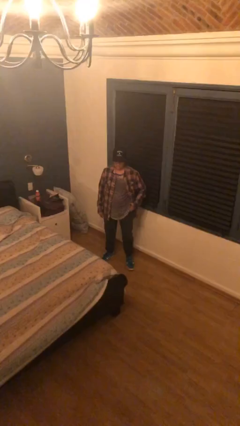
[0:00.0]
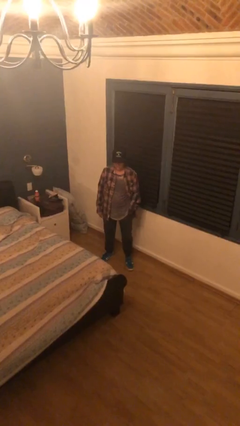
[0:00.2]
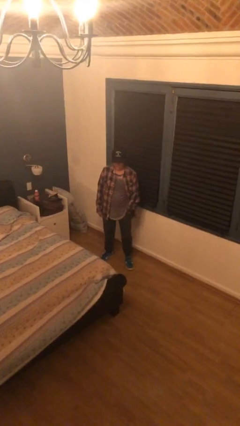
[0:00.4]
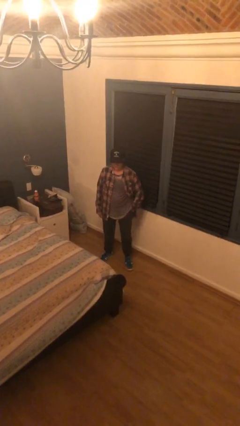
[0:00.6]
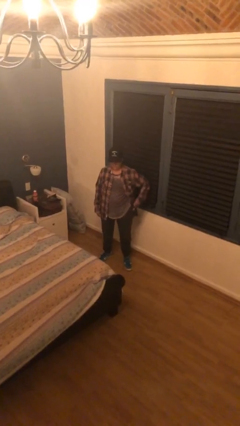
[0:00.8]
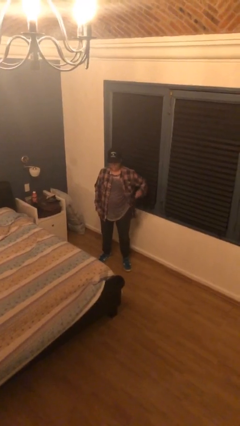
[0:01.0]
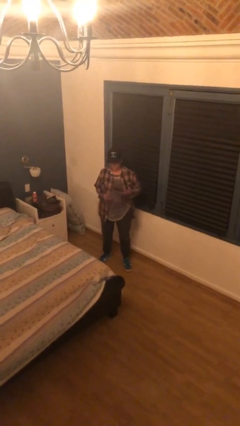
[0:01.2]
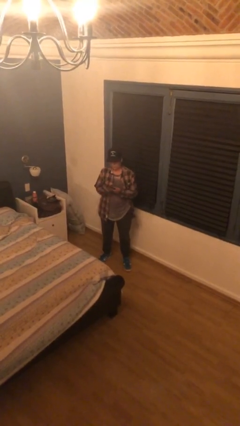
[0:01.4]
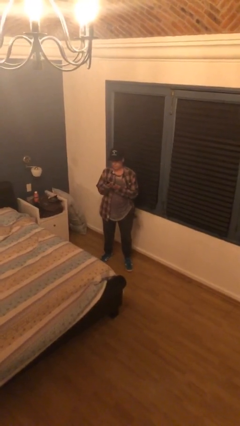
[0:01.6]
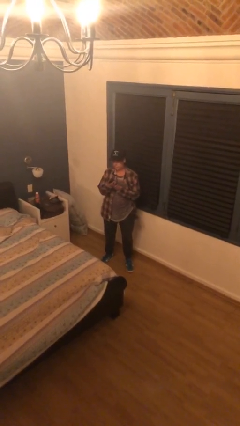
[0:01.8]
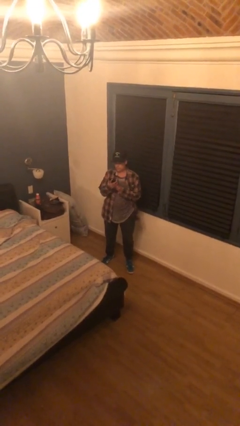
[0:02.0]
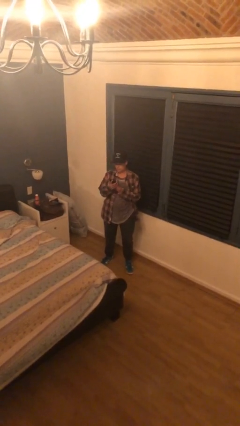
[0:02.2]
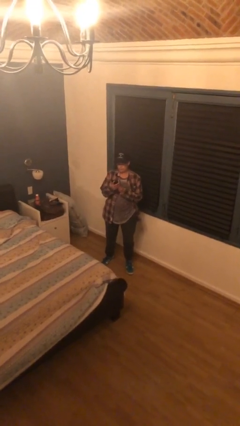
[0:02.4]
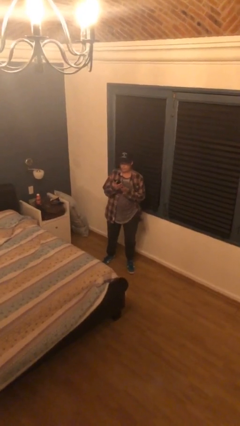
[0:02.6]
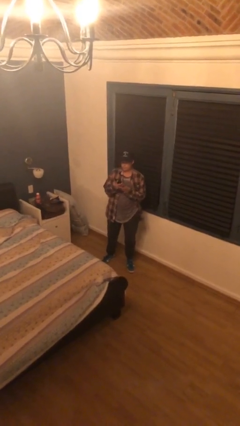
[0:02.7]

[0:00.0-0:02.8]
person takes phone from pocket

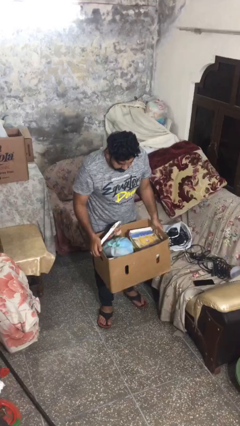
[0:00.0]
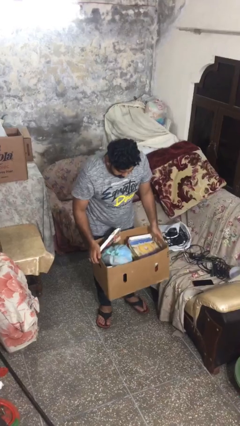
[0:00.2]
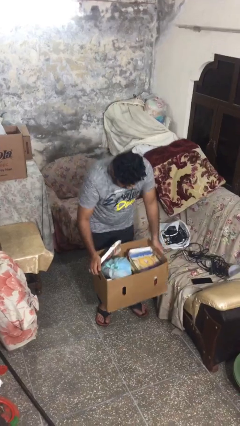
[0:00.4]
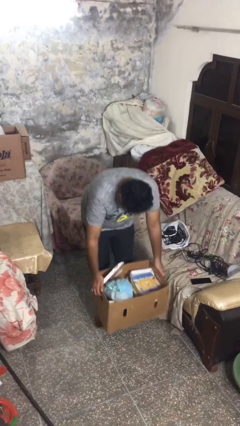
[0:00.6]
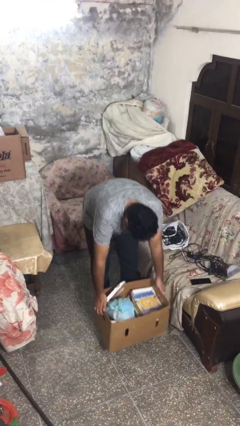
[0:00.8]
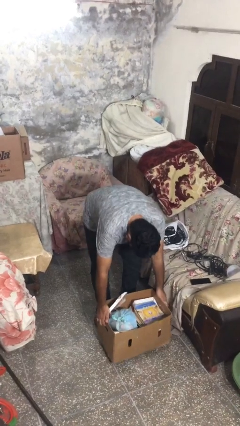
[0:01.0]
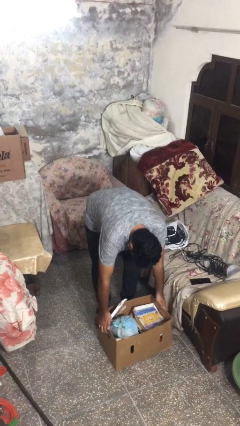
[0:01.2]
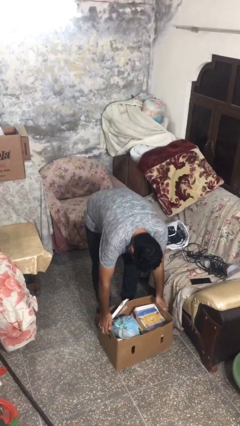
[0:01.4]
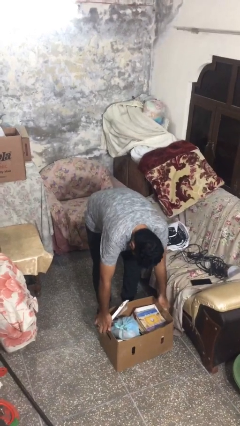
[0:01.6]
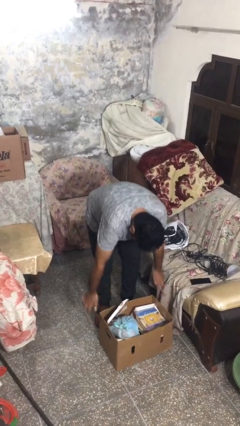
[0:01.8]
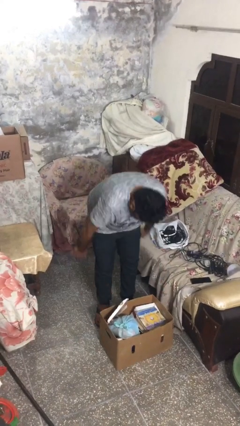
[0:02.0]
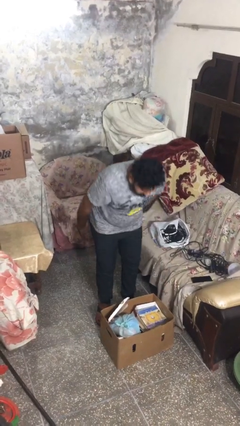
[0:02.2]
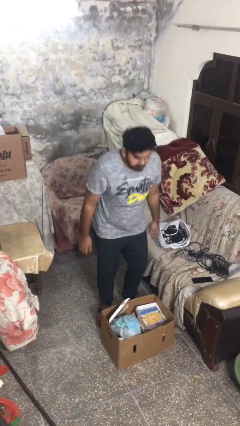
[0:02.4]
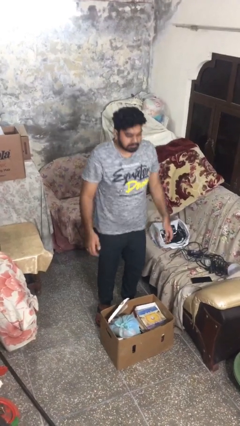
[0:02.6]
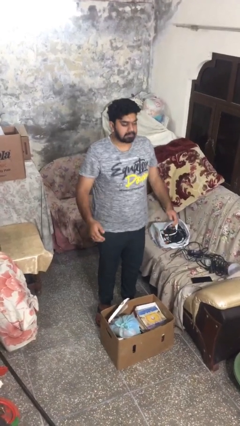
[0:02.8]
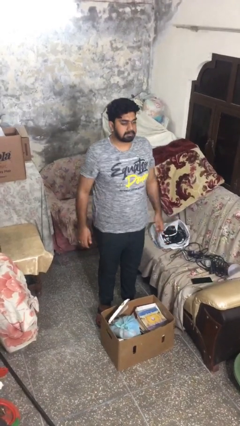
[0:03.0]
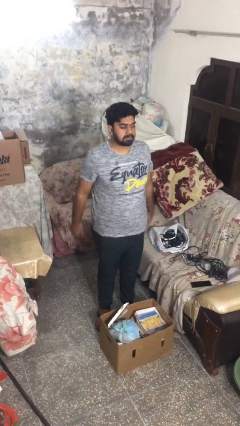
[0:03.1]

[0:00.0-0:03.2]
person puts down object on floor

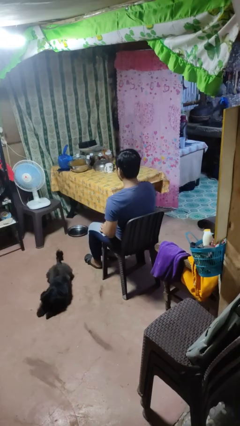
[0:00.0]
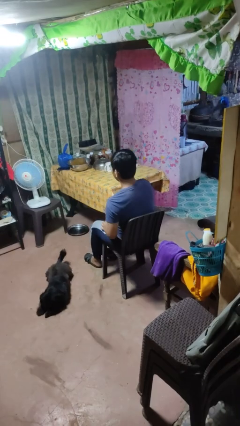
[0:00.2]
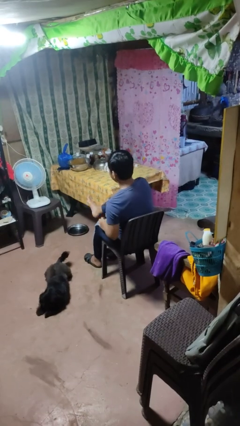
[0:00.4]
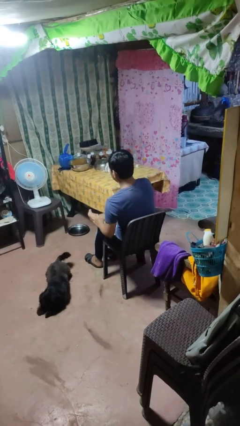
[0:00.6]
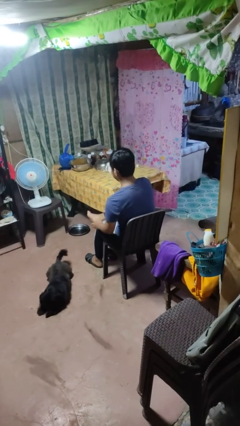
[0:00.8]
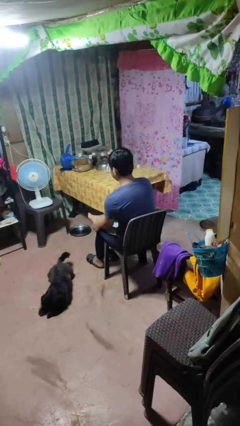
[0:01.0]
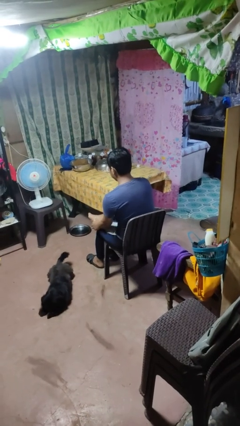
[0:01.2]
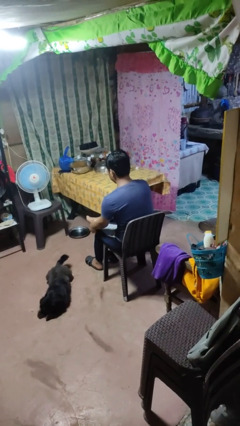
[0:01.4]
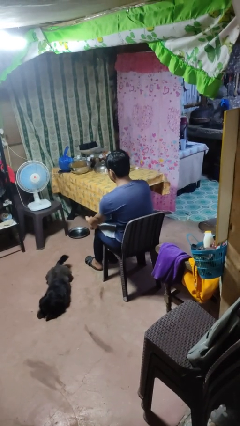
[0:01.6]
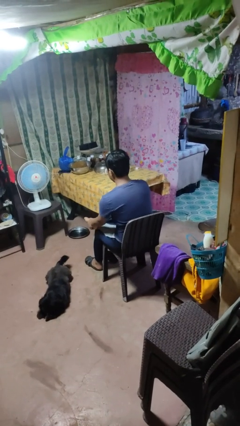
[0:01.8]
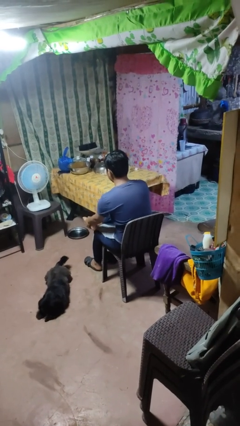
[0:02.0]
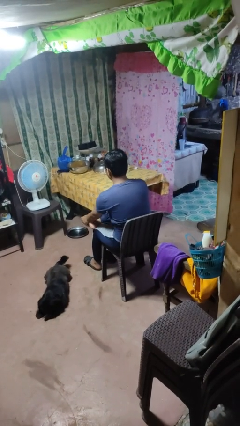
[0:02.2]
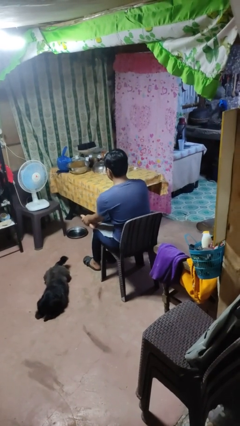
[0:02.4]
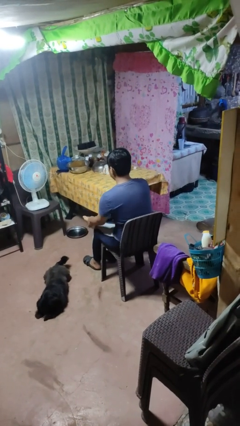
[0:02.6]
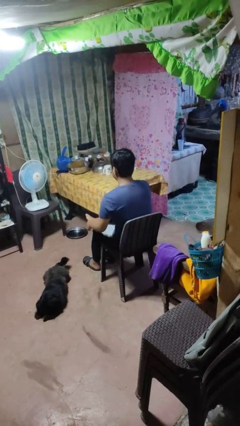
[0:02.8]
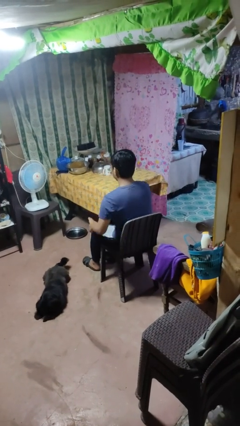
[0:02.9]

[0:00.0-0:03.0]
person rubs foot

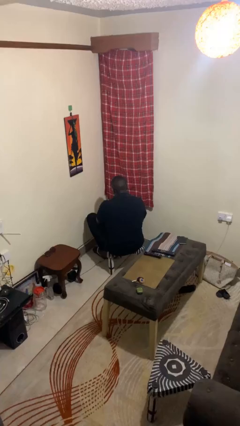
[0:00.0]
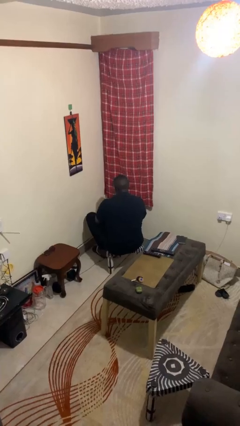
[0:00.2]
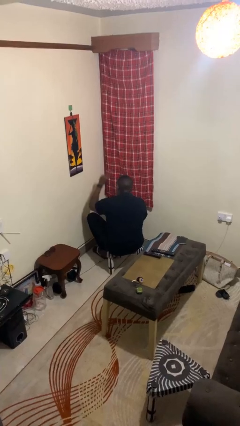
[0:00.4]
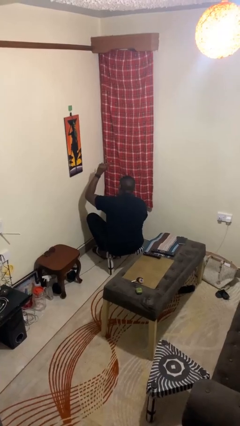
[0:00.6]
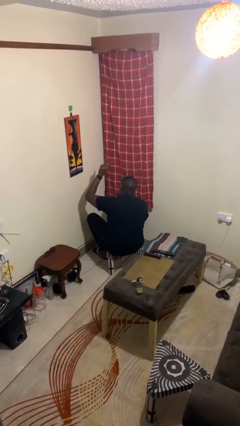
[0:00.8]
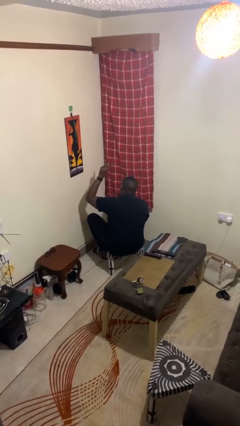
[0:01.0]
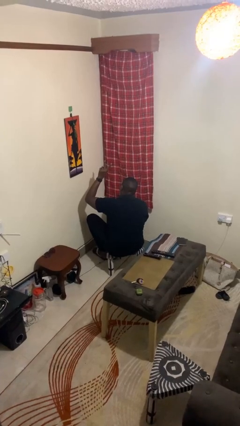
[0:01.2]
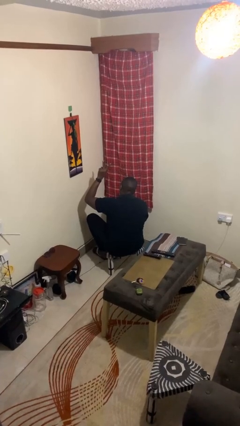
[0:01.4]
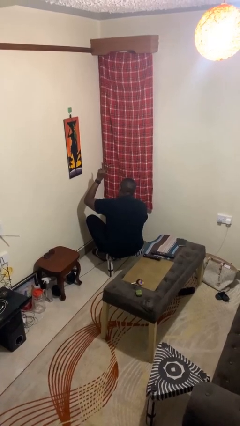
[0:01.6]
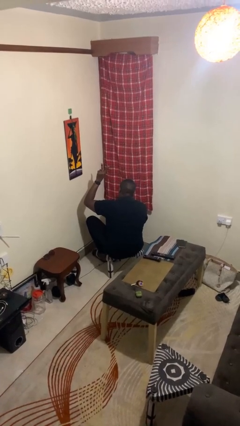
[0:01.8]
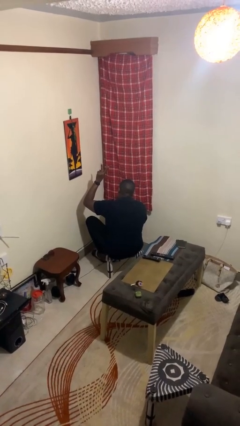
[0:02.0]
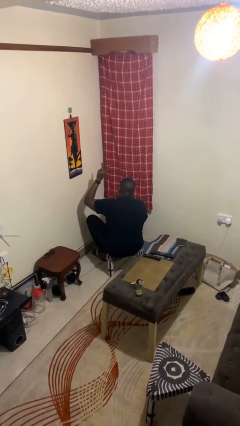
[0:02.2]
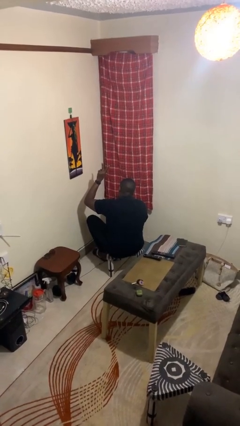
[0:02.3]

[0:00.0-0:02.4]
person gestures peace

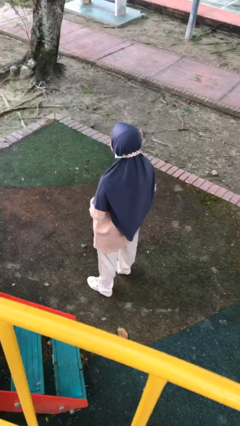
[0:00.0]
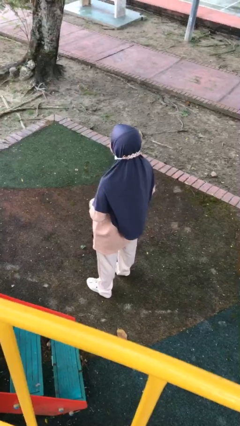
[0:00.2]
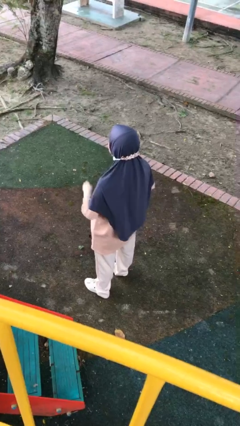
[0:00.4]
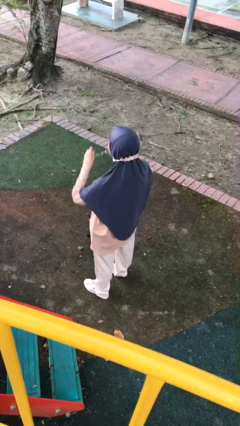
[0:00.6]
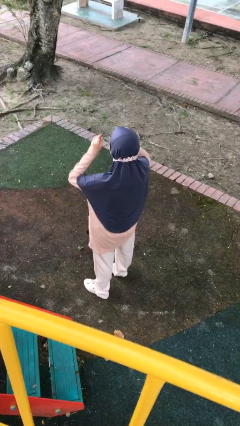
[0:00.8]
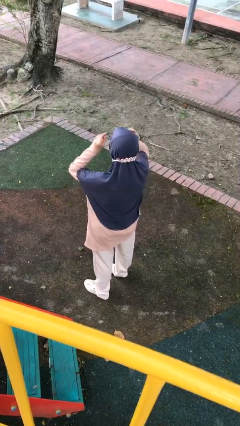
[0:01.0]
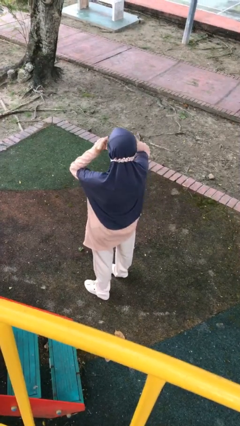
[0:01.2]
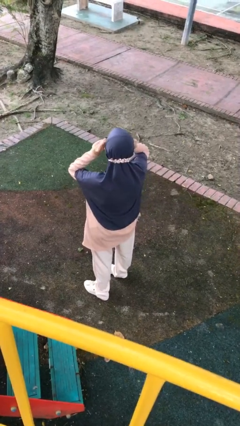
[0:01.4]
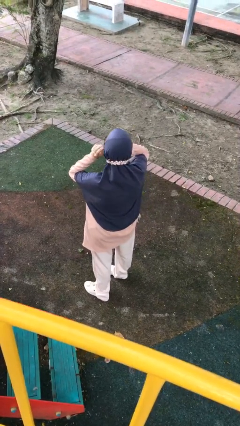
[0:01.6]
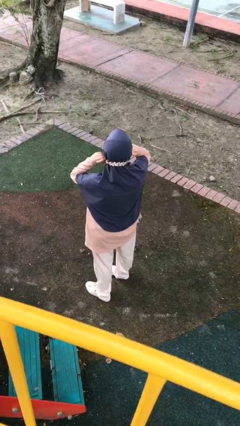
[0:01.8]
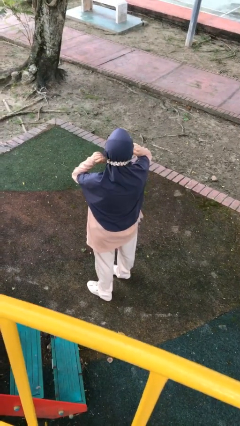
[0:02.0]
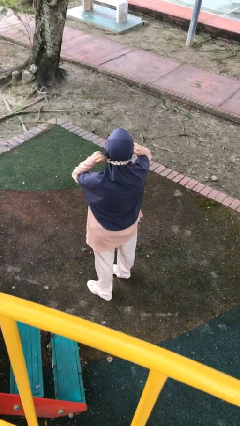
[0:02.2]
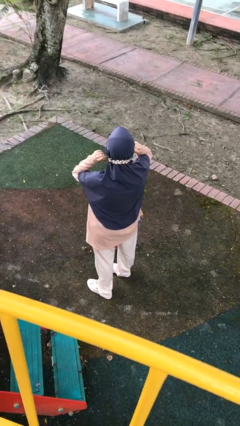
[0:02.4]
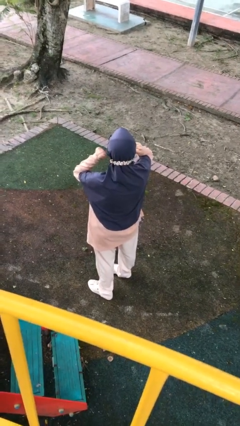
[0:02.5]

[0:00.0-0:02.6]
person puts on glasses

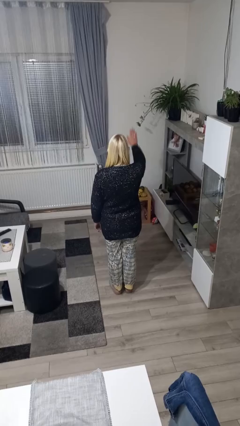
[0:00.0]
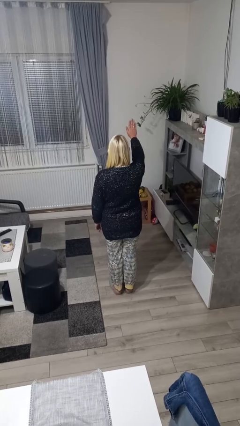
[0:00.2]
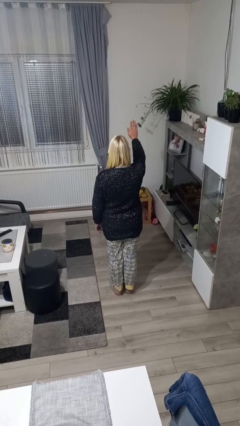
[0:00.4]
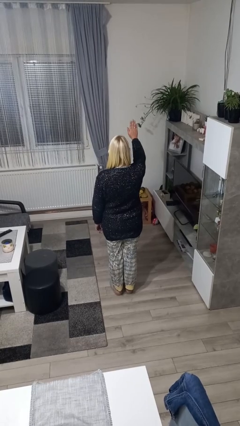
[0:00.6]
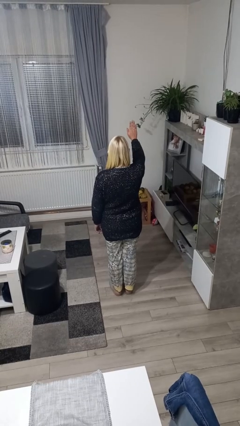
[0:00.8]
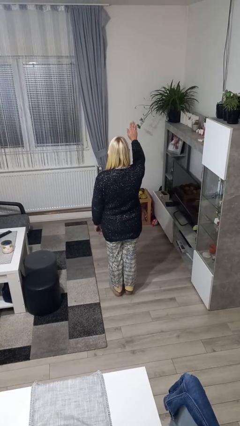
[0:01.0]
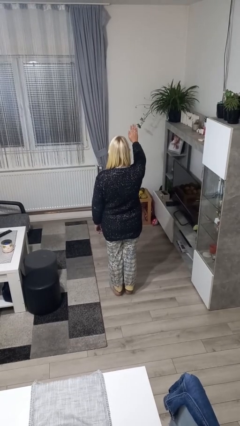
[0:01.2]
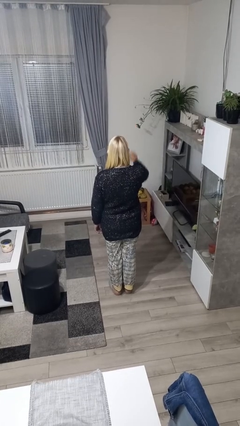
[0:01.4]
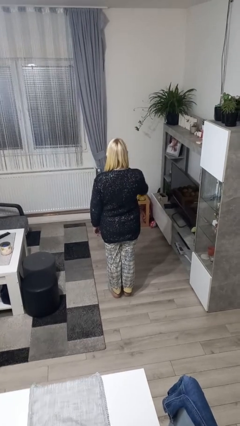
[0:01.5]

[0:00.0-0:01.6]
person gestures stop

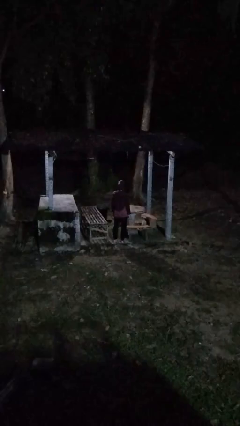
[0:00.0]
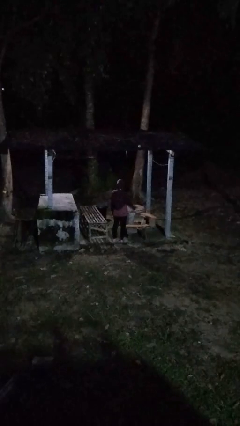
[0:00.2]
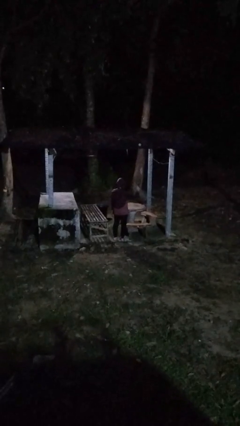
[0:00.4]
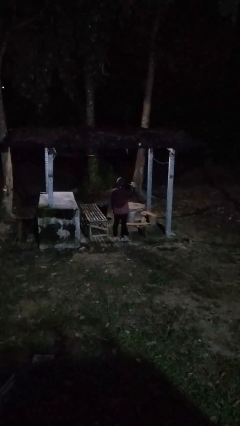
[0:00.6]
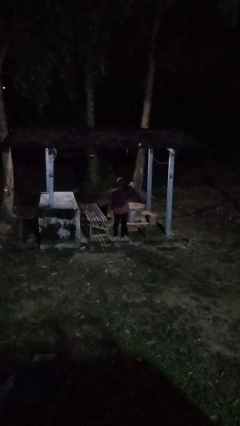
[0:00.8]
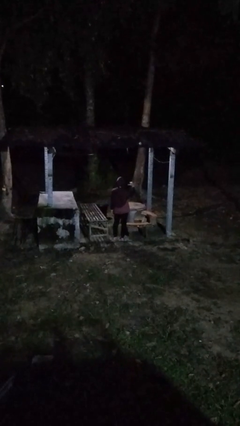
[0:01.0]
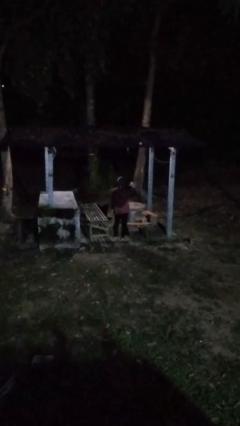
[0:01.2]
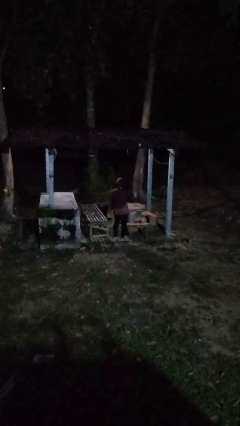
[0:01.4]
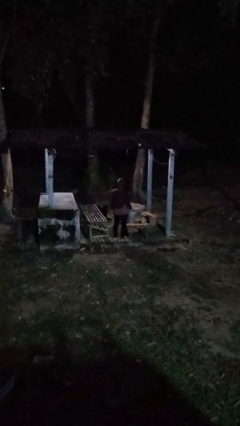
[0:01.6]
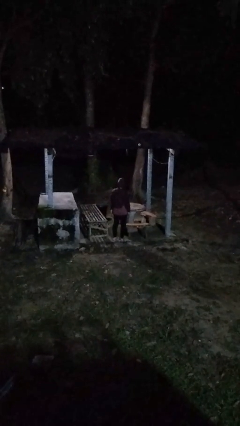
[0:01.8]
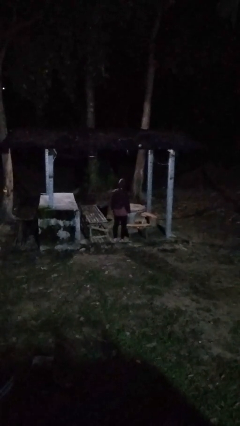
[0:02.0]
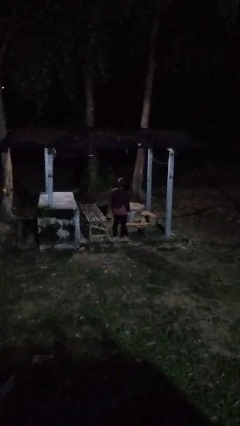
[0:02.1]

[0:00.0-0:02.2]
person gestures behind me
